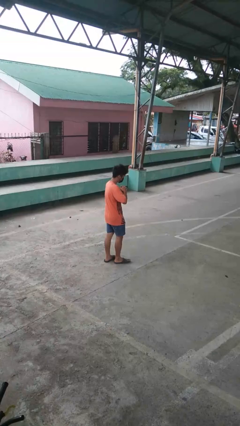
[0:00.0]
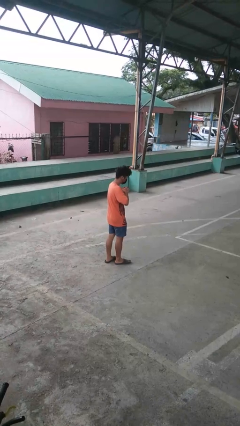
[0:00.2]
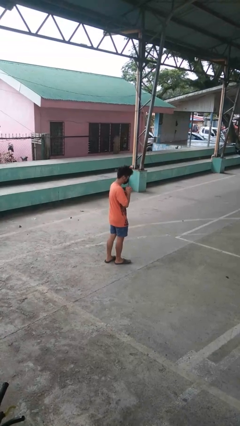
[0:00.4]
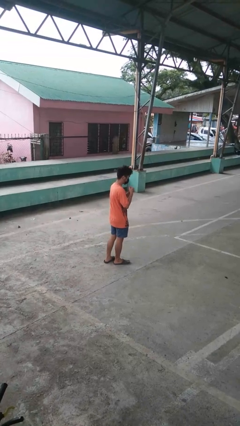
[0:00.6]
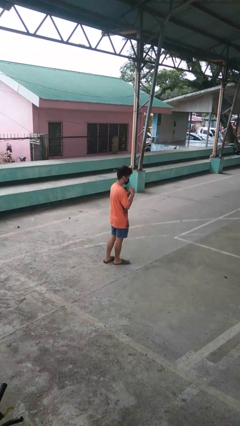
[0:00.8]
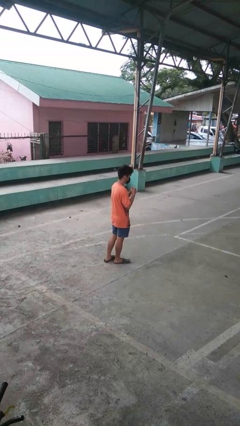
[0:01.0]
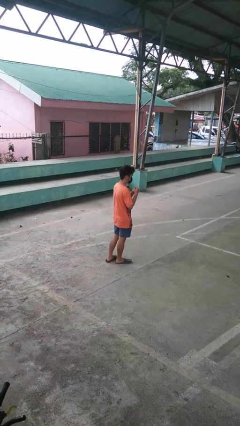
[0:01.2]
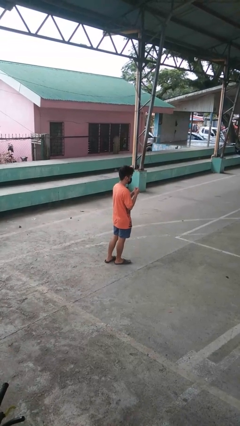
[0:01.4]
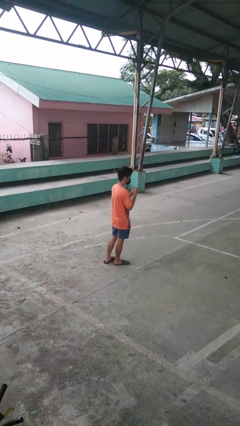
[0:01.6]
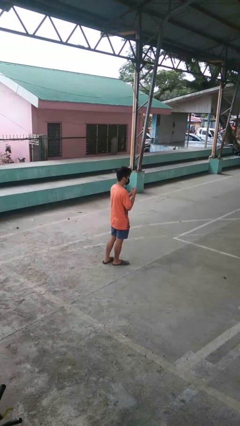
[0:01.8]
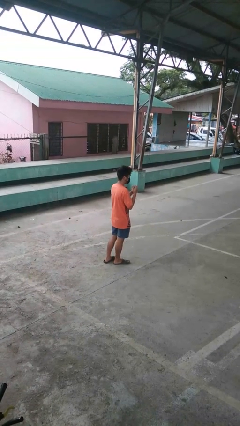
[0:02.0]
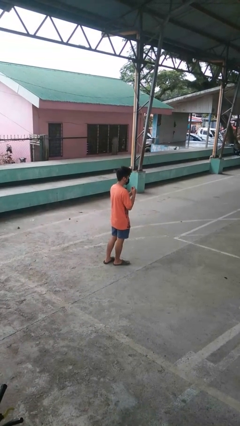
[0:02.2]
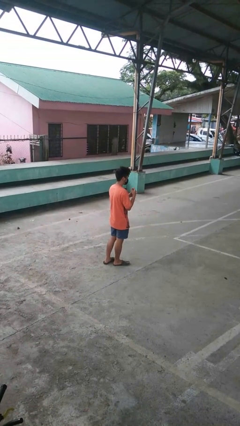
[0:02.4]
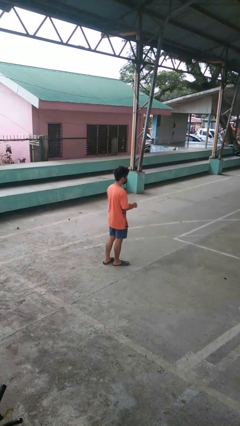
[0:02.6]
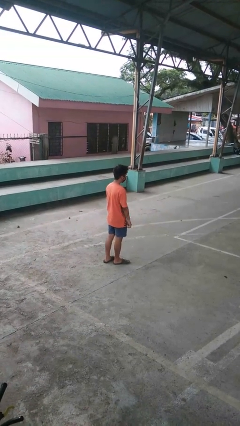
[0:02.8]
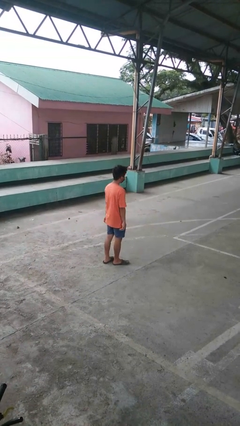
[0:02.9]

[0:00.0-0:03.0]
person cracks knuckles

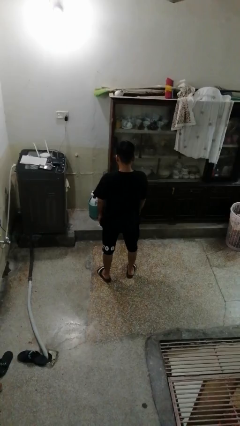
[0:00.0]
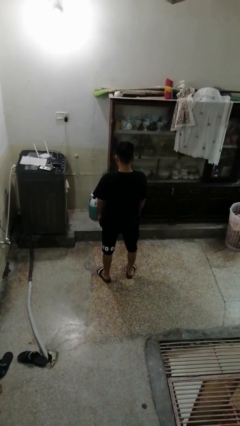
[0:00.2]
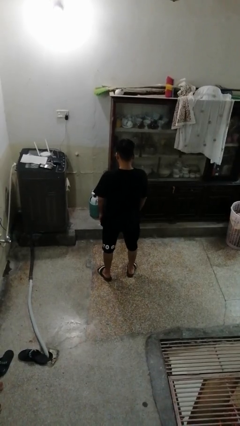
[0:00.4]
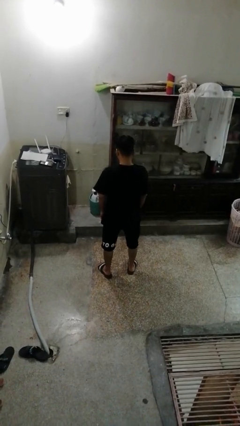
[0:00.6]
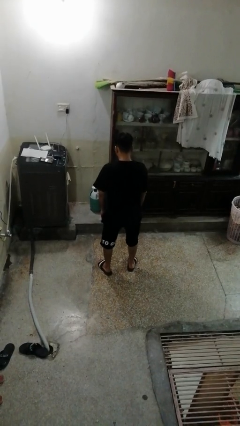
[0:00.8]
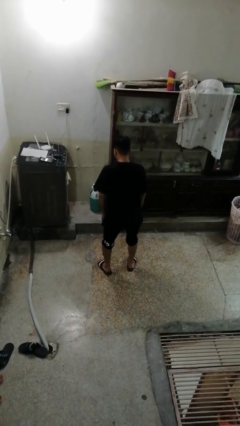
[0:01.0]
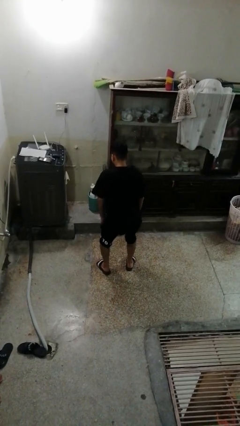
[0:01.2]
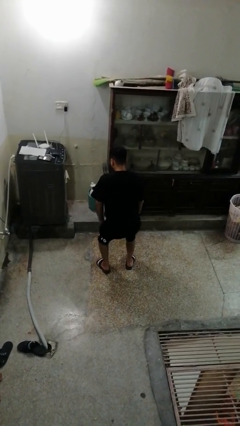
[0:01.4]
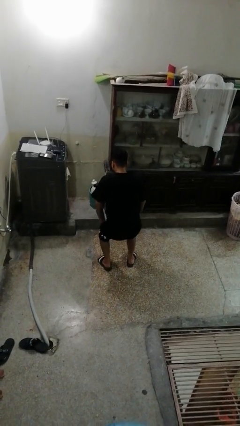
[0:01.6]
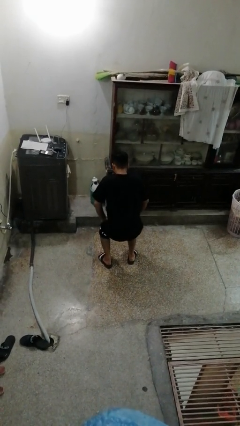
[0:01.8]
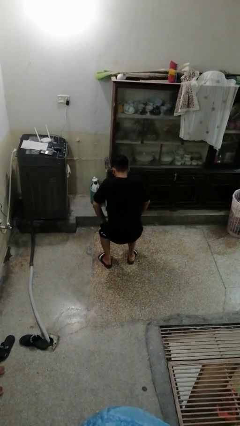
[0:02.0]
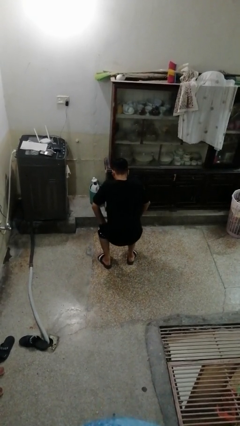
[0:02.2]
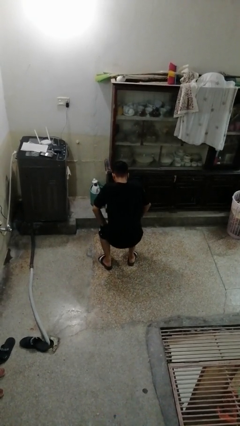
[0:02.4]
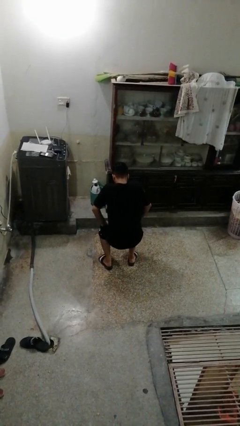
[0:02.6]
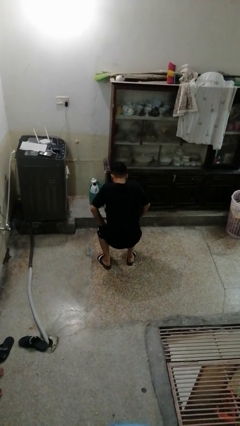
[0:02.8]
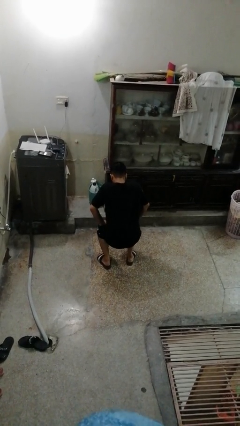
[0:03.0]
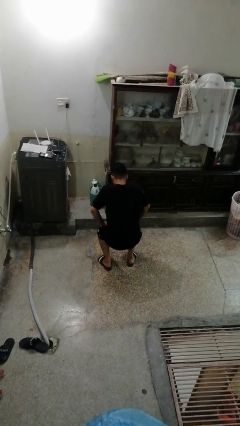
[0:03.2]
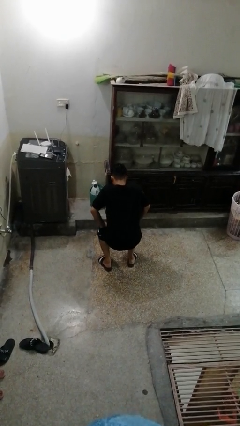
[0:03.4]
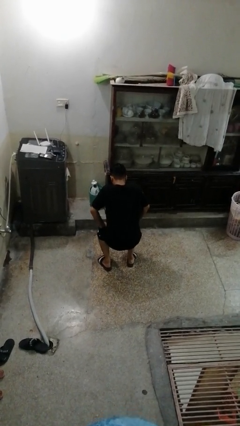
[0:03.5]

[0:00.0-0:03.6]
person squats

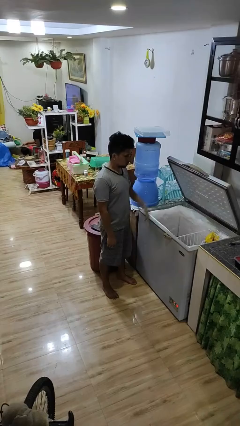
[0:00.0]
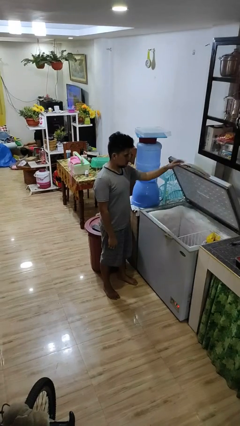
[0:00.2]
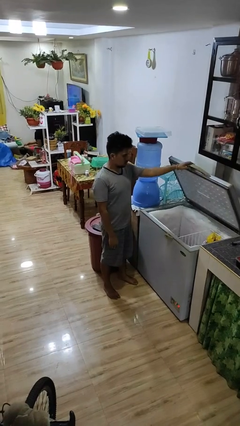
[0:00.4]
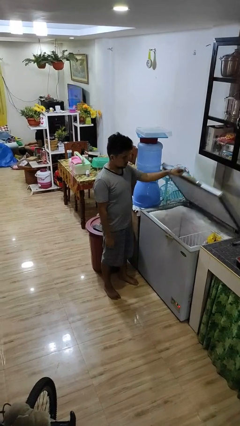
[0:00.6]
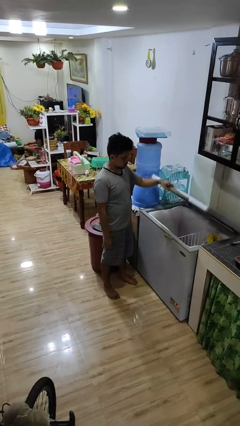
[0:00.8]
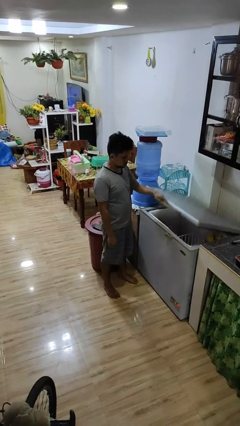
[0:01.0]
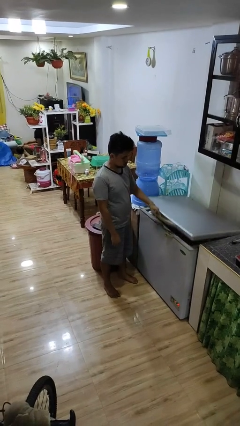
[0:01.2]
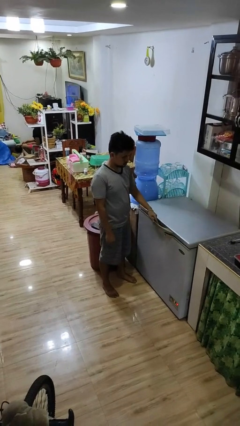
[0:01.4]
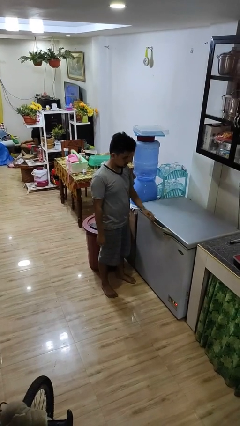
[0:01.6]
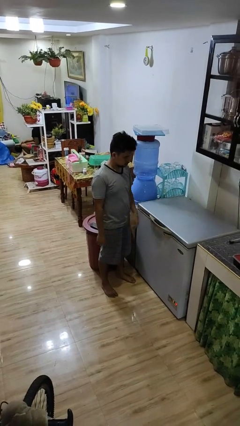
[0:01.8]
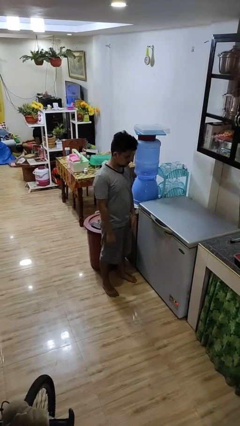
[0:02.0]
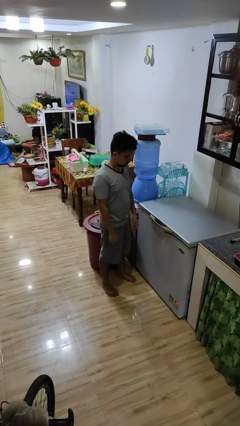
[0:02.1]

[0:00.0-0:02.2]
person closes refrigerator

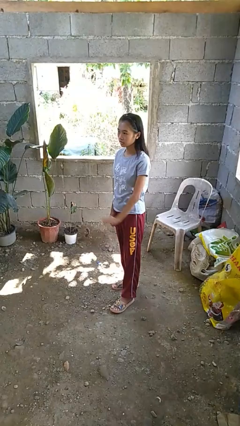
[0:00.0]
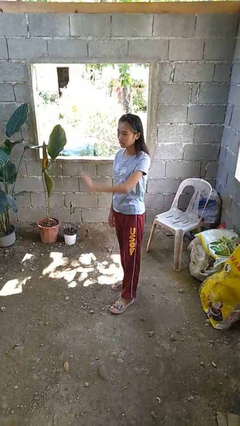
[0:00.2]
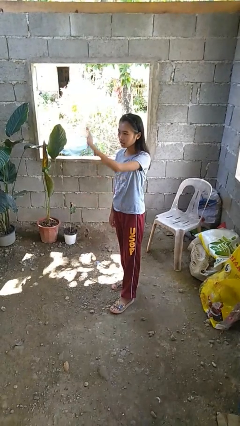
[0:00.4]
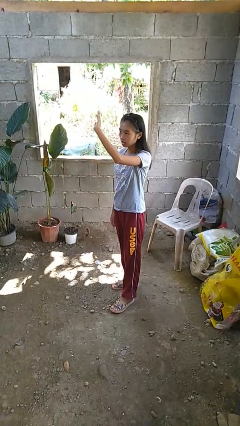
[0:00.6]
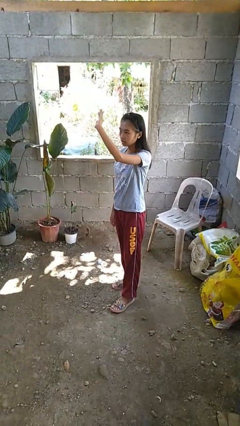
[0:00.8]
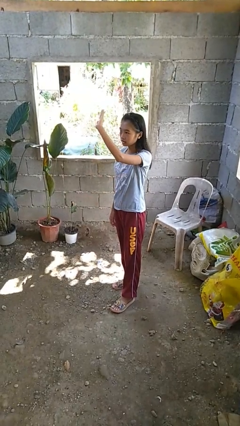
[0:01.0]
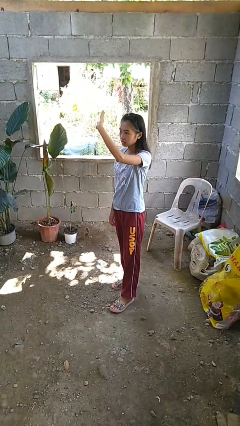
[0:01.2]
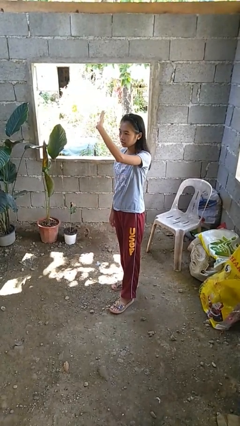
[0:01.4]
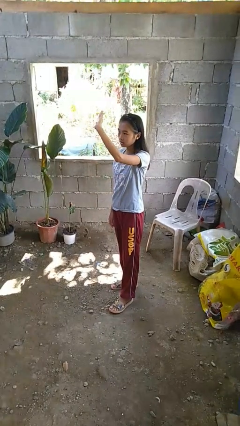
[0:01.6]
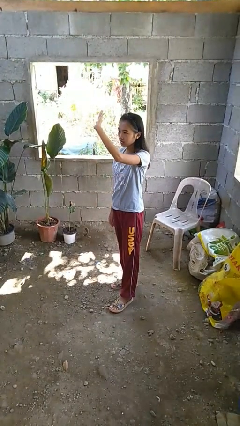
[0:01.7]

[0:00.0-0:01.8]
person gestures swipe up

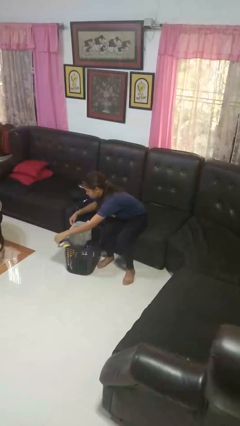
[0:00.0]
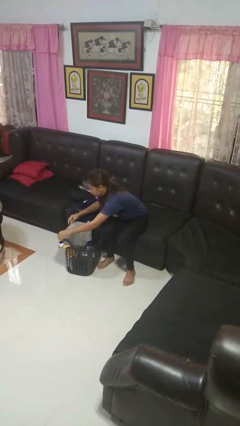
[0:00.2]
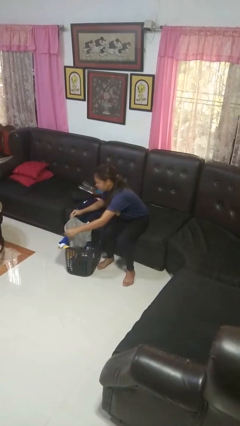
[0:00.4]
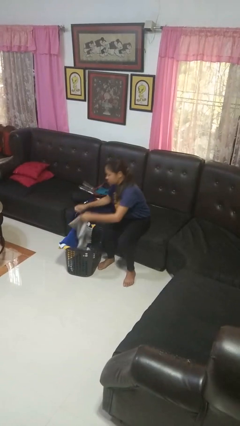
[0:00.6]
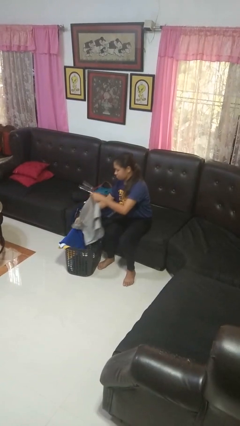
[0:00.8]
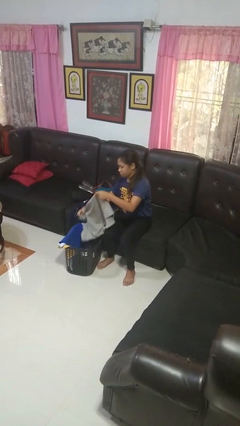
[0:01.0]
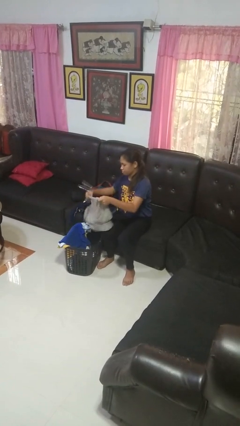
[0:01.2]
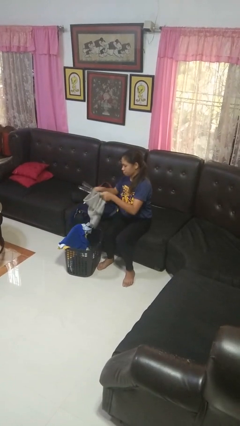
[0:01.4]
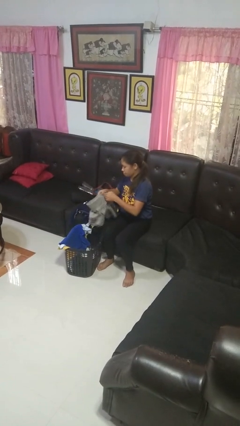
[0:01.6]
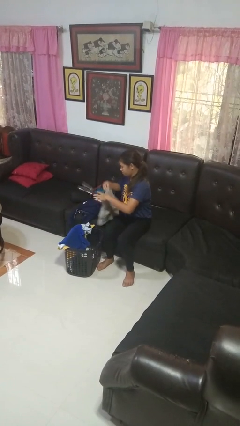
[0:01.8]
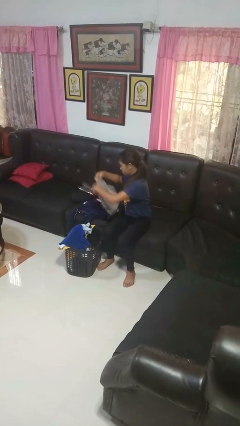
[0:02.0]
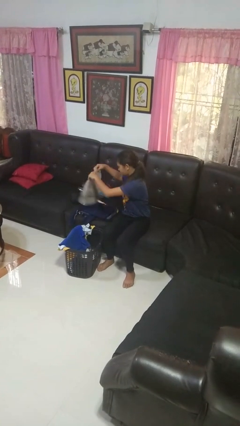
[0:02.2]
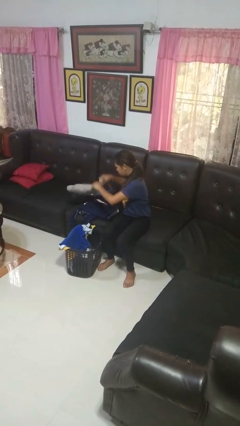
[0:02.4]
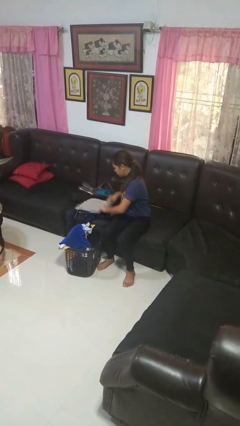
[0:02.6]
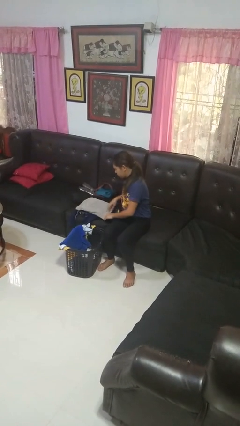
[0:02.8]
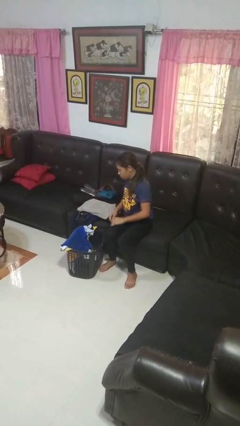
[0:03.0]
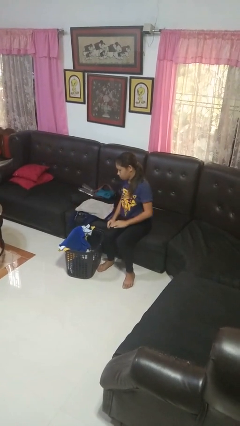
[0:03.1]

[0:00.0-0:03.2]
person folds shirt

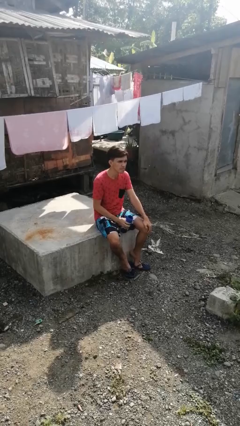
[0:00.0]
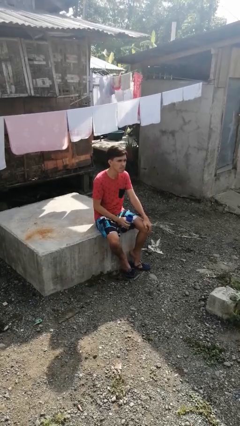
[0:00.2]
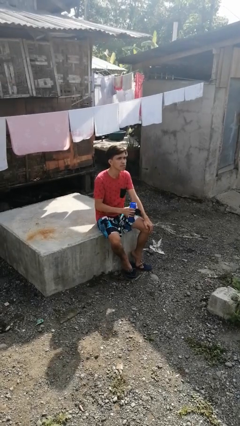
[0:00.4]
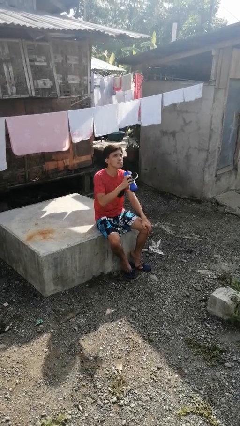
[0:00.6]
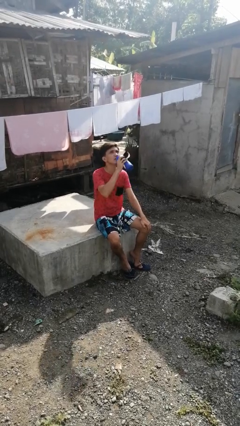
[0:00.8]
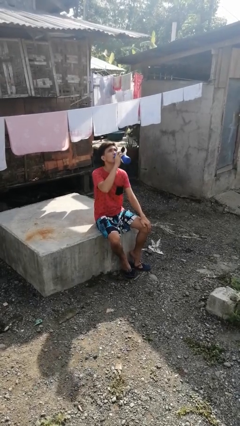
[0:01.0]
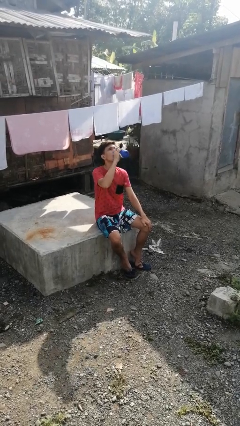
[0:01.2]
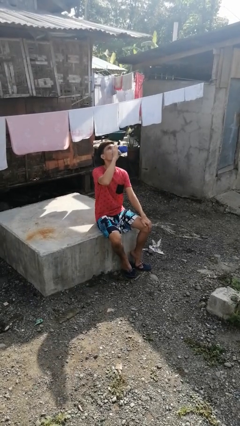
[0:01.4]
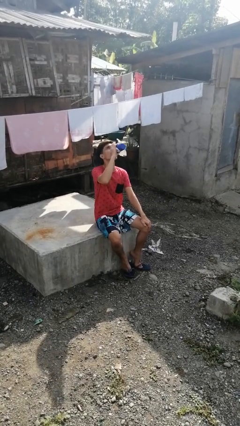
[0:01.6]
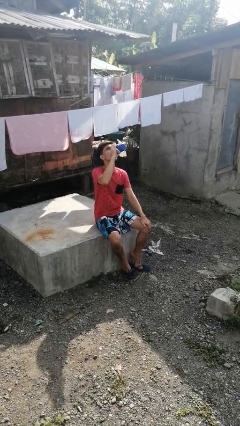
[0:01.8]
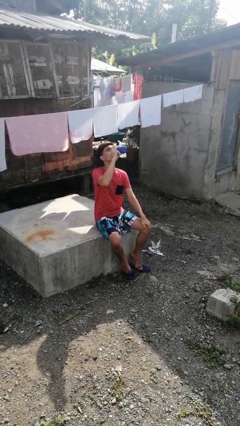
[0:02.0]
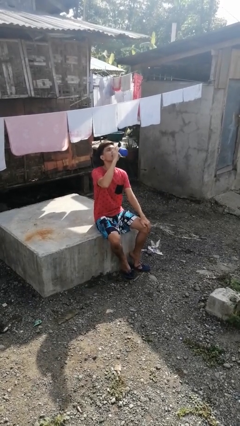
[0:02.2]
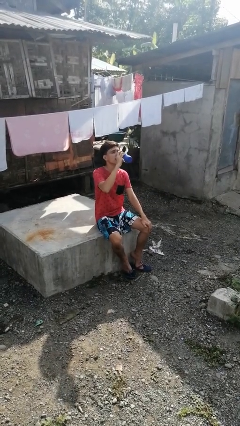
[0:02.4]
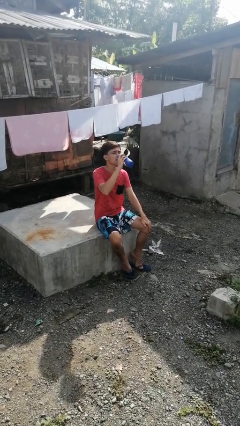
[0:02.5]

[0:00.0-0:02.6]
person drinks from bottle

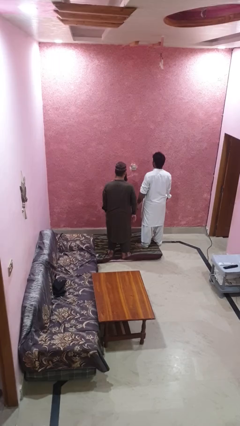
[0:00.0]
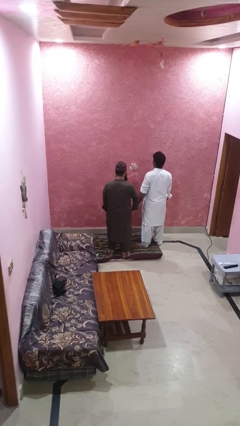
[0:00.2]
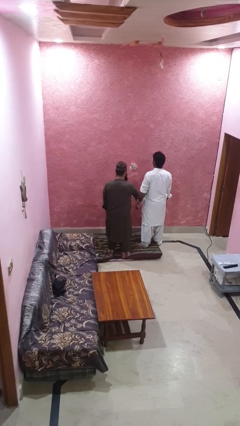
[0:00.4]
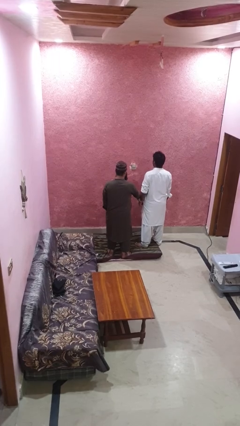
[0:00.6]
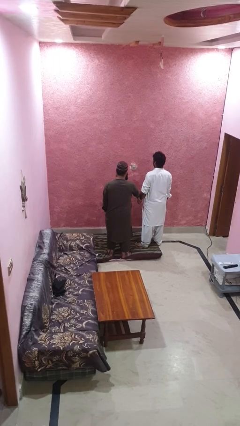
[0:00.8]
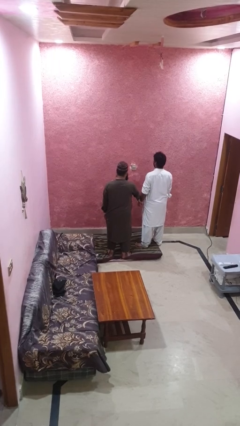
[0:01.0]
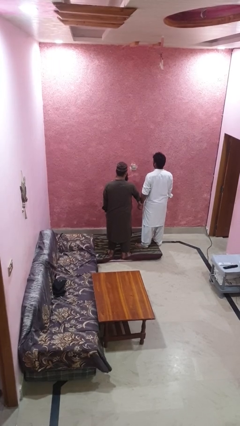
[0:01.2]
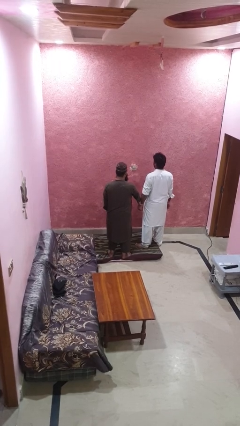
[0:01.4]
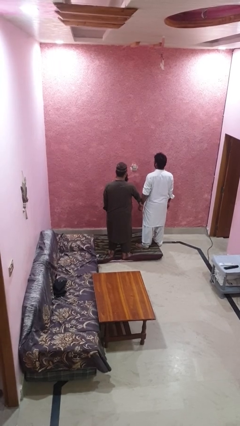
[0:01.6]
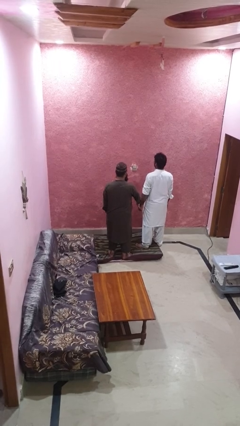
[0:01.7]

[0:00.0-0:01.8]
person grabs person by forearm
